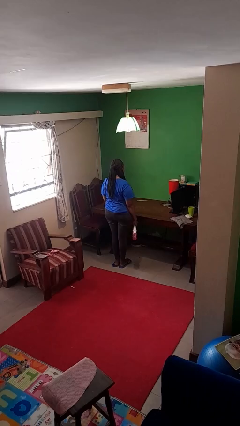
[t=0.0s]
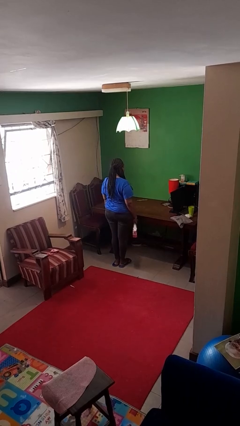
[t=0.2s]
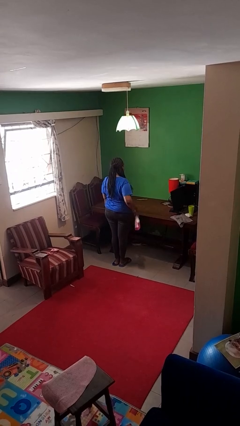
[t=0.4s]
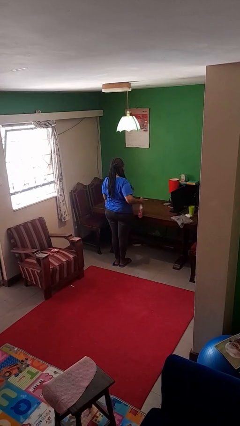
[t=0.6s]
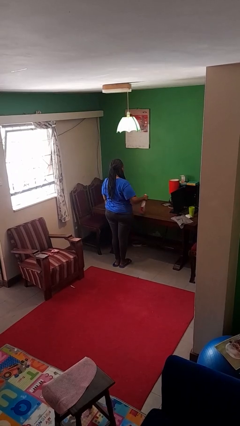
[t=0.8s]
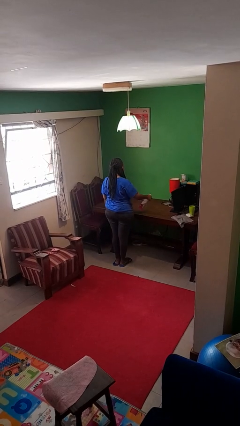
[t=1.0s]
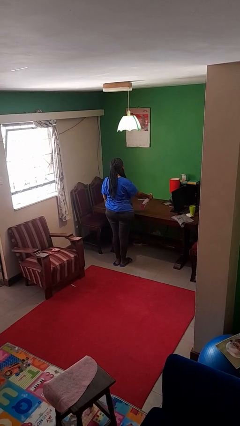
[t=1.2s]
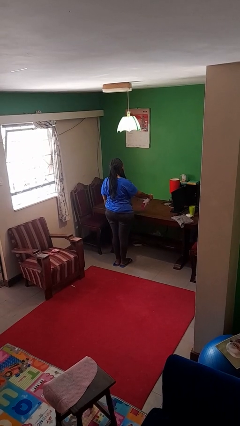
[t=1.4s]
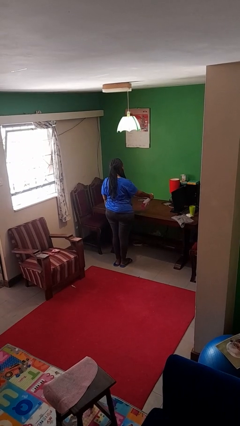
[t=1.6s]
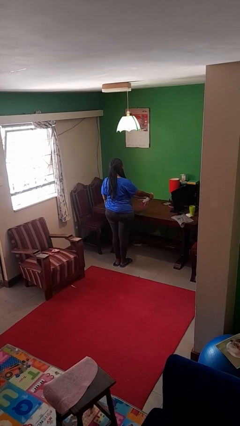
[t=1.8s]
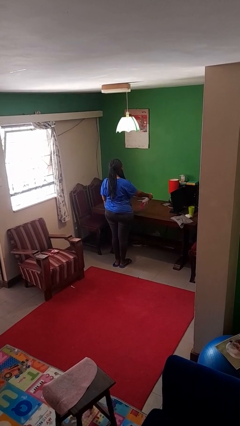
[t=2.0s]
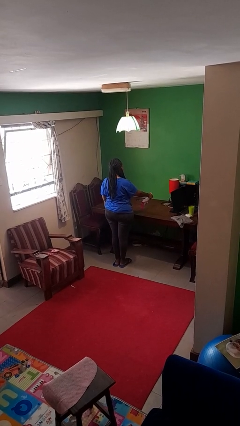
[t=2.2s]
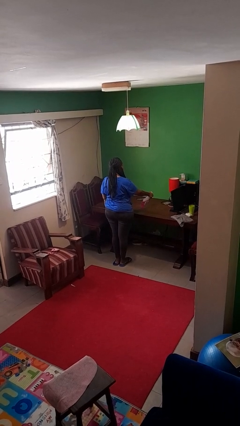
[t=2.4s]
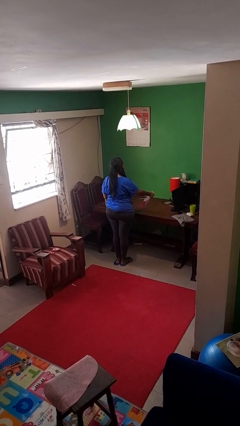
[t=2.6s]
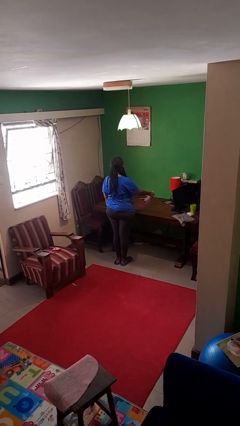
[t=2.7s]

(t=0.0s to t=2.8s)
person sprays from bottle

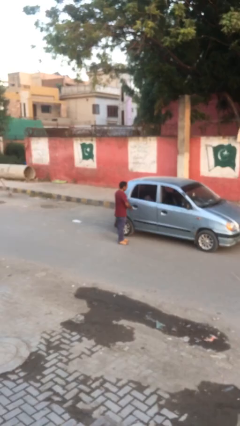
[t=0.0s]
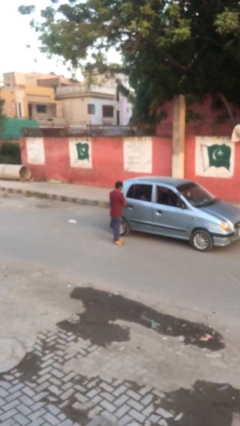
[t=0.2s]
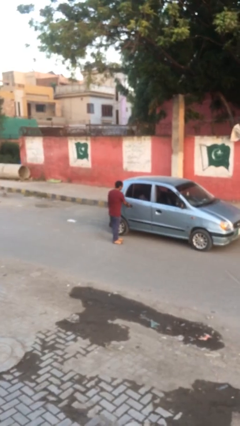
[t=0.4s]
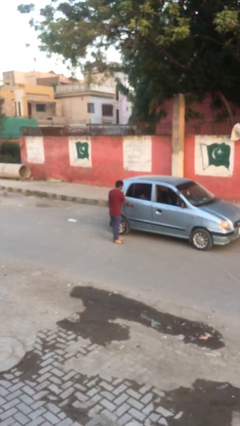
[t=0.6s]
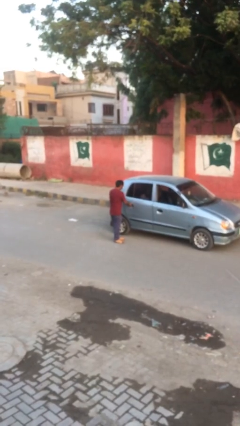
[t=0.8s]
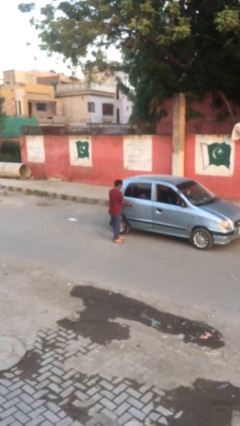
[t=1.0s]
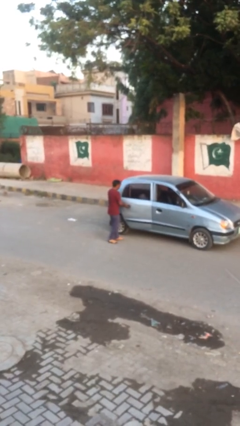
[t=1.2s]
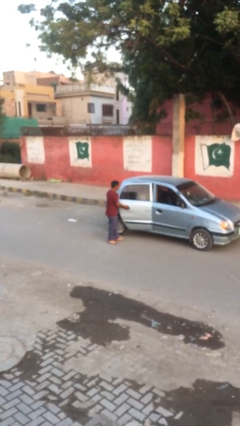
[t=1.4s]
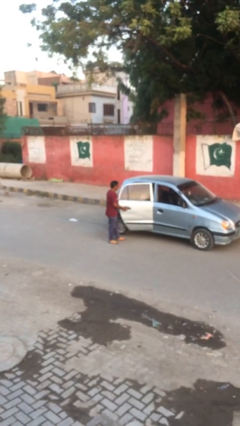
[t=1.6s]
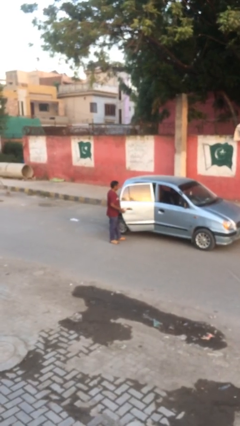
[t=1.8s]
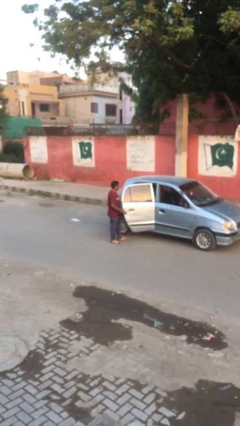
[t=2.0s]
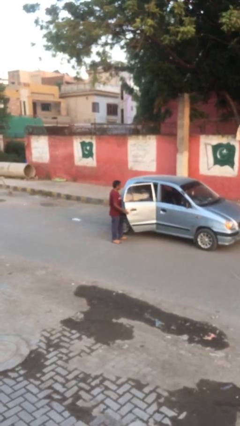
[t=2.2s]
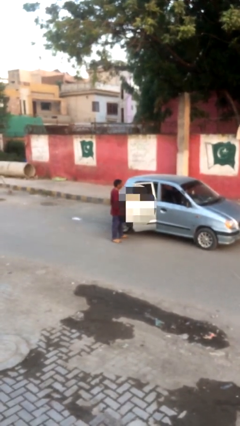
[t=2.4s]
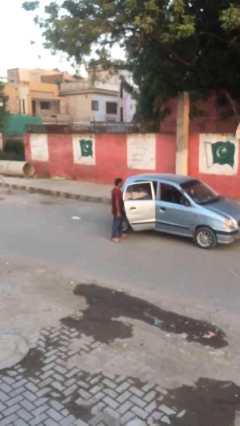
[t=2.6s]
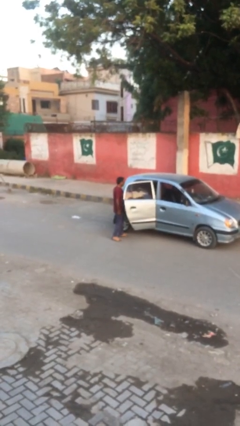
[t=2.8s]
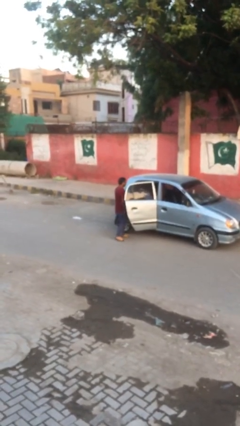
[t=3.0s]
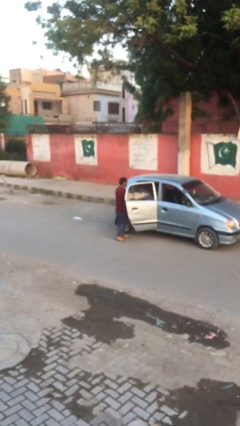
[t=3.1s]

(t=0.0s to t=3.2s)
person opens car door

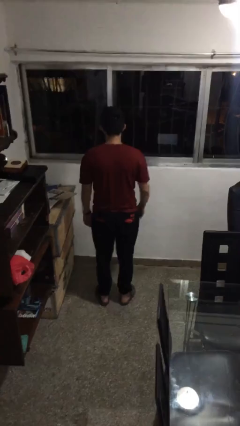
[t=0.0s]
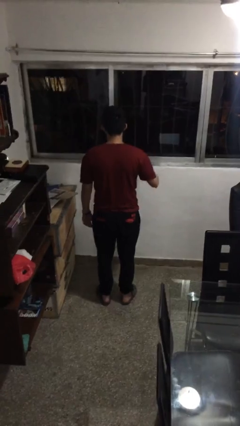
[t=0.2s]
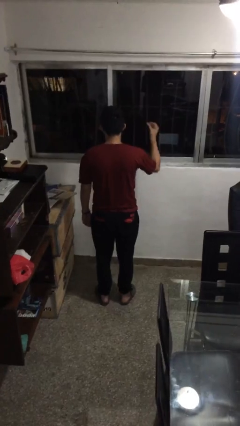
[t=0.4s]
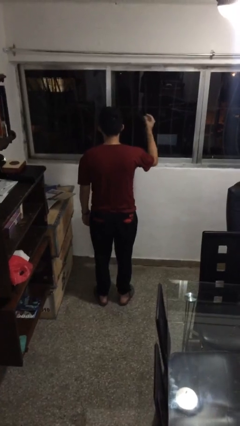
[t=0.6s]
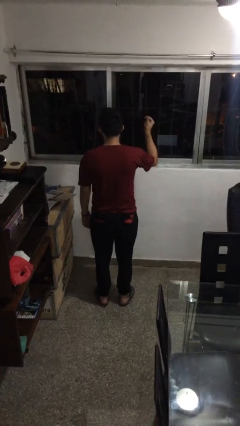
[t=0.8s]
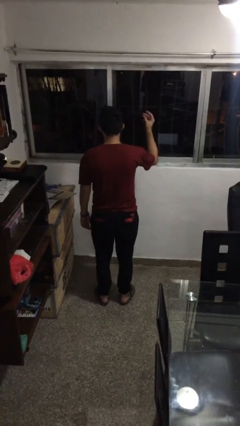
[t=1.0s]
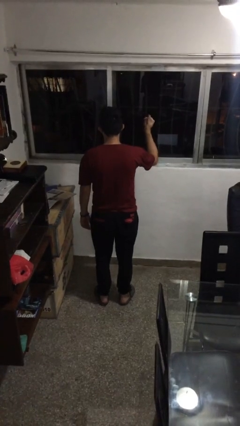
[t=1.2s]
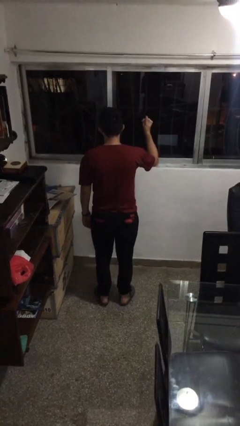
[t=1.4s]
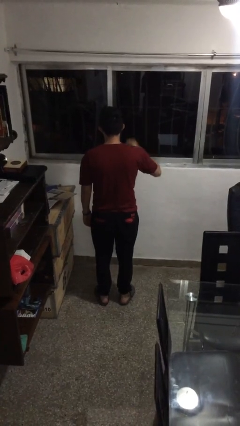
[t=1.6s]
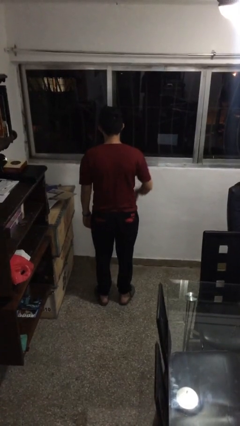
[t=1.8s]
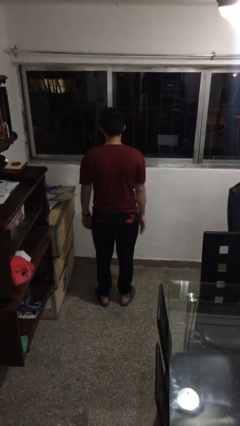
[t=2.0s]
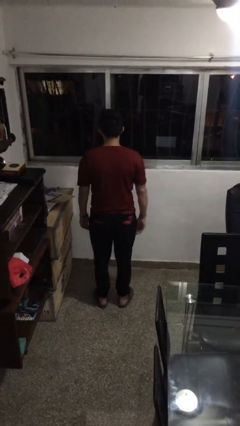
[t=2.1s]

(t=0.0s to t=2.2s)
person snaps fingers

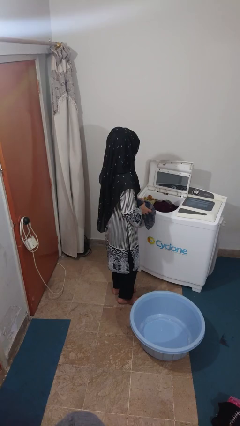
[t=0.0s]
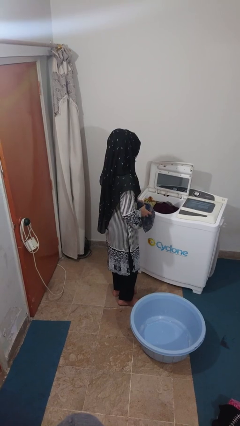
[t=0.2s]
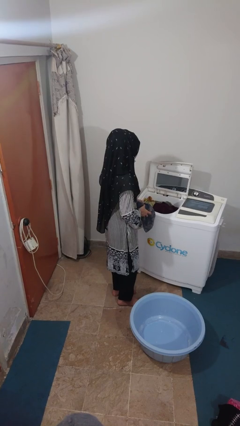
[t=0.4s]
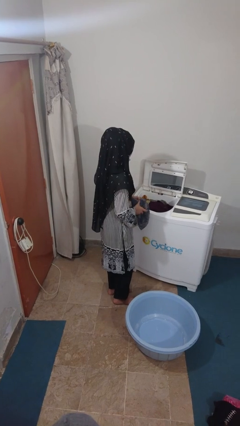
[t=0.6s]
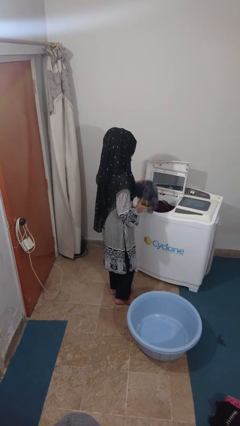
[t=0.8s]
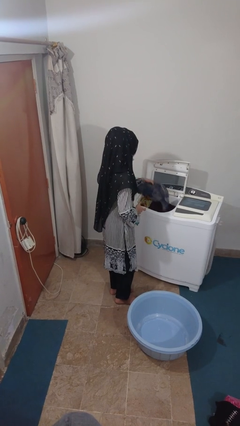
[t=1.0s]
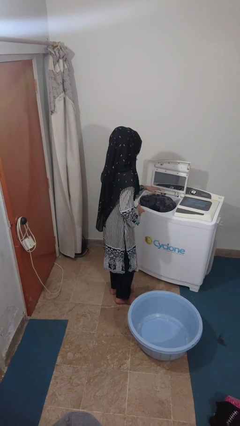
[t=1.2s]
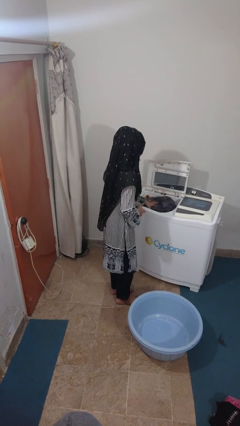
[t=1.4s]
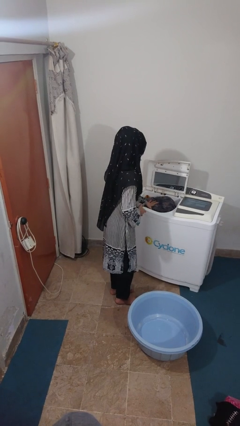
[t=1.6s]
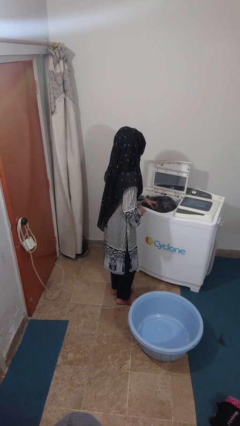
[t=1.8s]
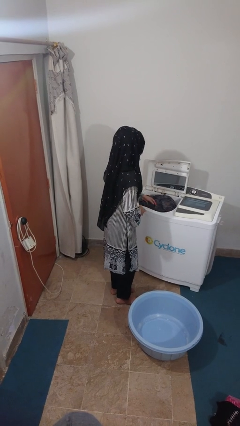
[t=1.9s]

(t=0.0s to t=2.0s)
person loads clotheswasher

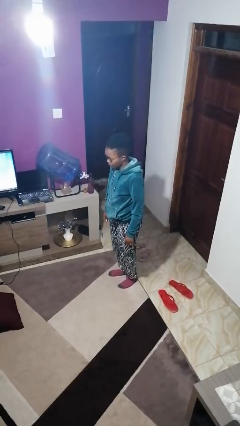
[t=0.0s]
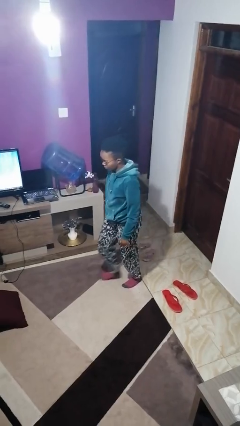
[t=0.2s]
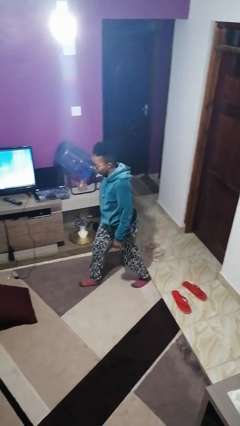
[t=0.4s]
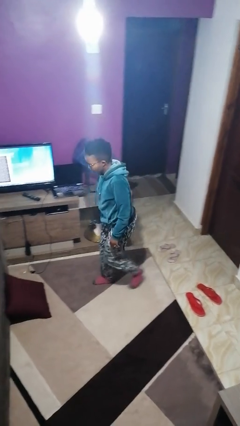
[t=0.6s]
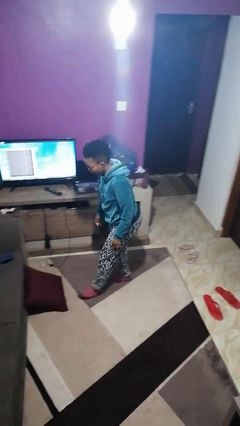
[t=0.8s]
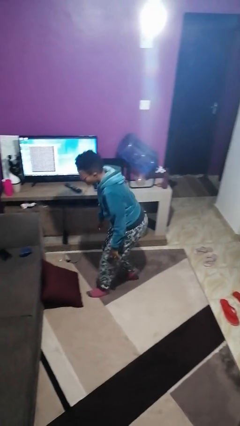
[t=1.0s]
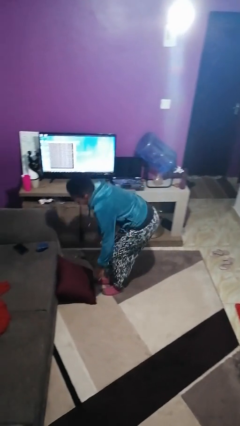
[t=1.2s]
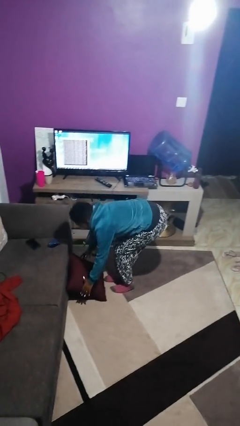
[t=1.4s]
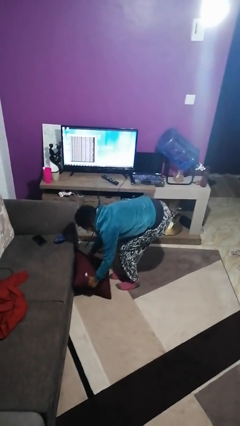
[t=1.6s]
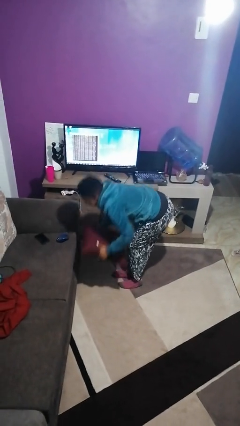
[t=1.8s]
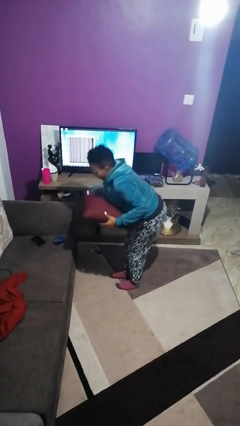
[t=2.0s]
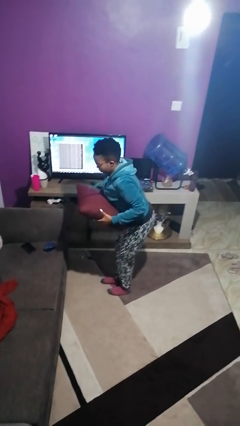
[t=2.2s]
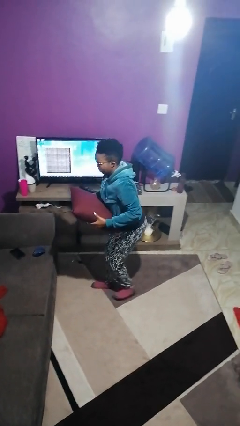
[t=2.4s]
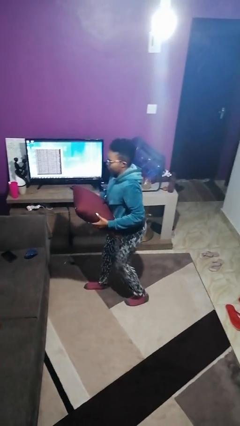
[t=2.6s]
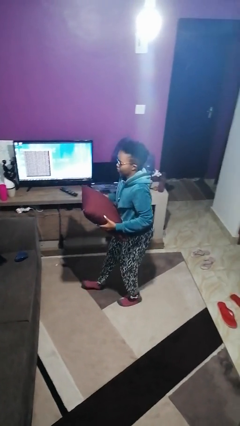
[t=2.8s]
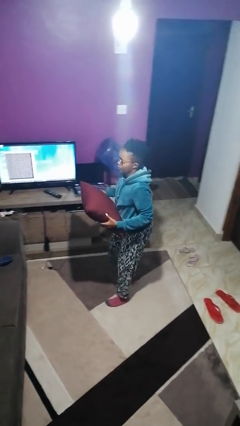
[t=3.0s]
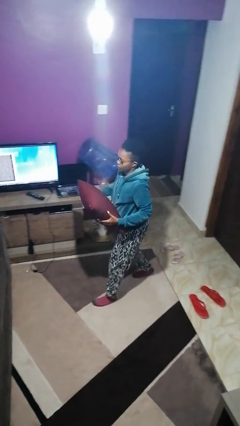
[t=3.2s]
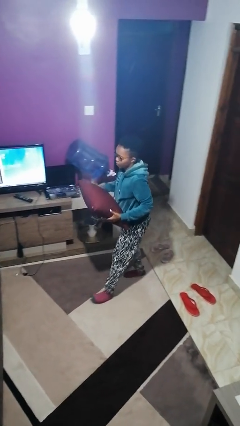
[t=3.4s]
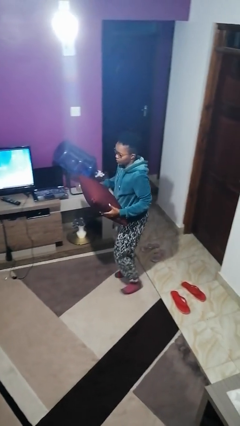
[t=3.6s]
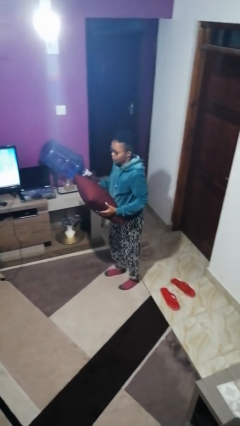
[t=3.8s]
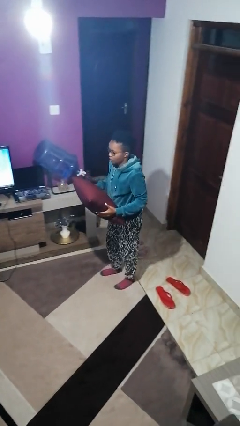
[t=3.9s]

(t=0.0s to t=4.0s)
person picks up object from floor

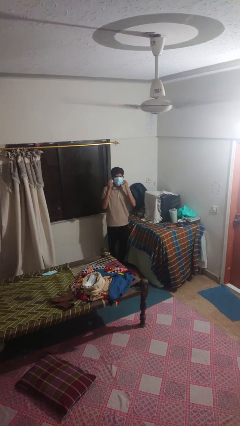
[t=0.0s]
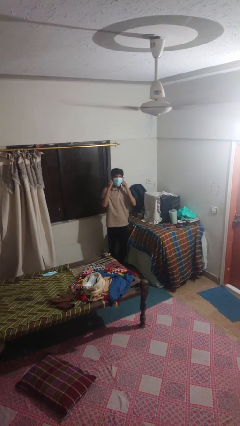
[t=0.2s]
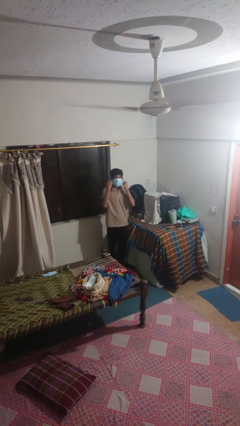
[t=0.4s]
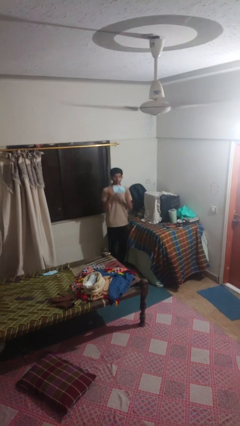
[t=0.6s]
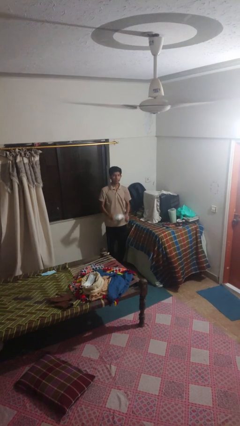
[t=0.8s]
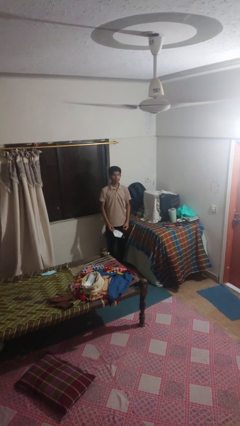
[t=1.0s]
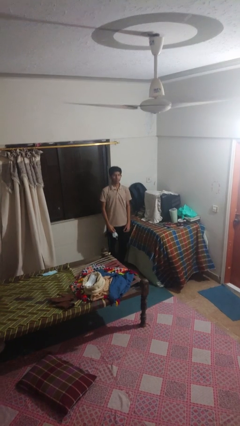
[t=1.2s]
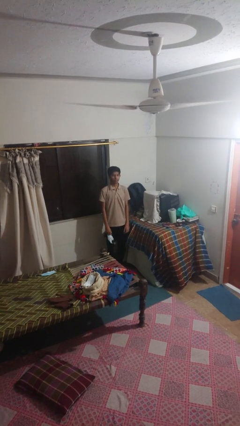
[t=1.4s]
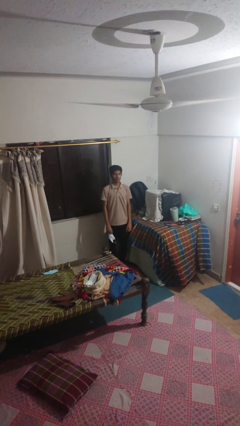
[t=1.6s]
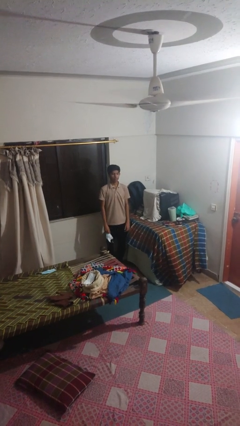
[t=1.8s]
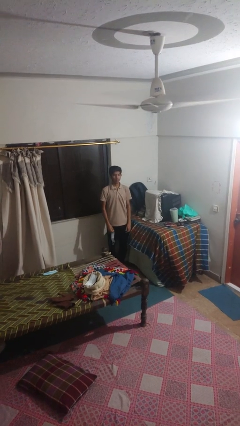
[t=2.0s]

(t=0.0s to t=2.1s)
person takes off facemask

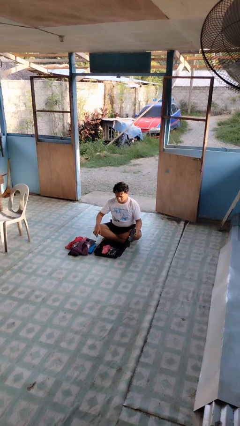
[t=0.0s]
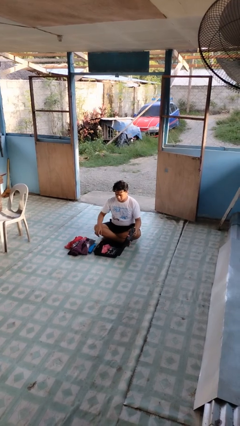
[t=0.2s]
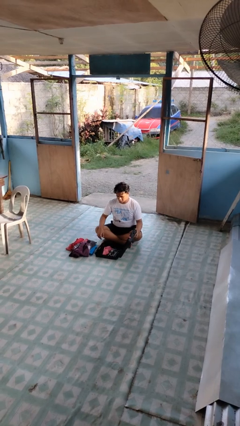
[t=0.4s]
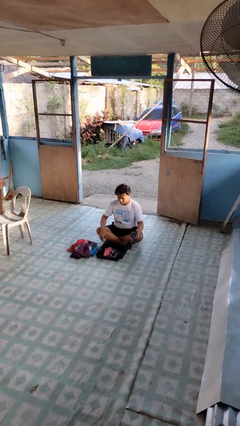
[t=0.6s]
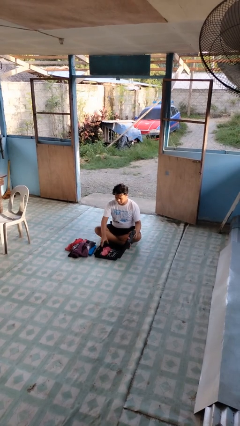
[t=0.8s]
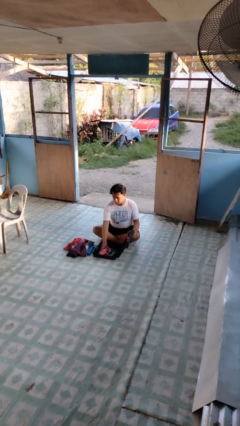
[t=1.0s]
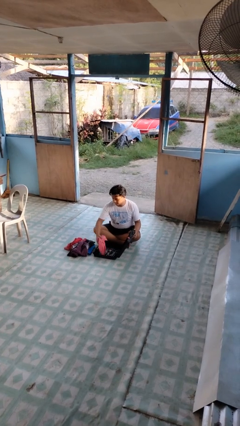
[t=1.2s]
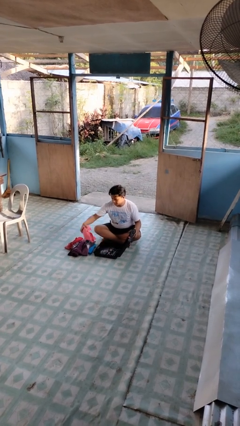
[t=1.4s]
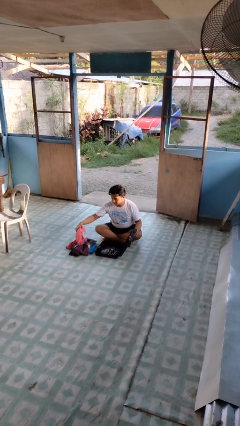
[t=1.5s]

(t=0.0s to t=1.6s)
person unloads clothes from suitcase
